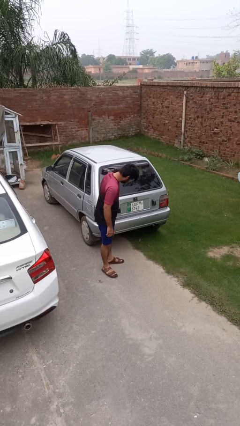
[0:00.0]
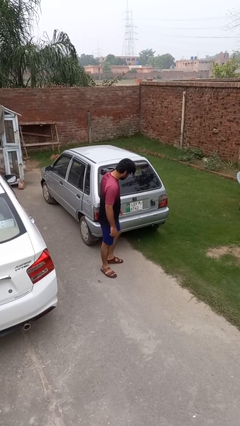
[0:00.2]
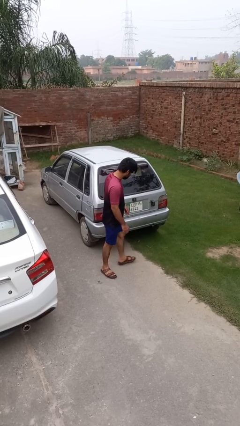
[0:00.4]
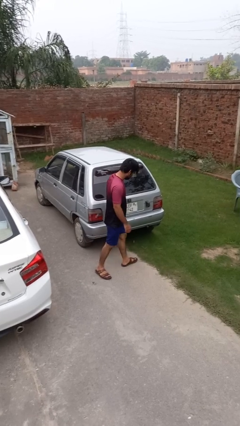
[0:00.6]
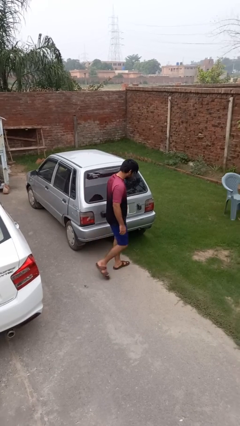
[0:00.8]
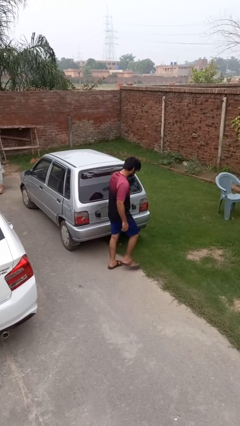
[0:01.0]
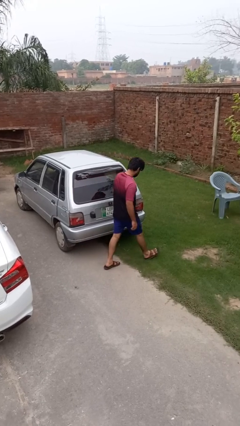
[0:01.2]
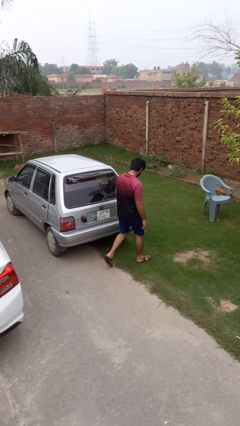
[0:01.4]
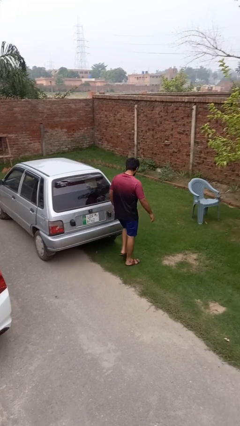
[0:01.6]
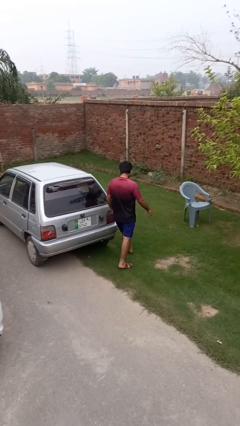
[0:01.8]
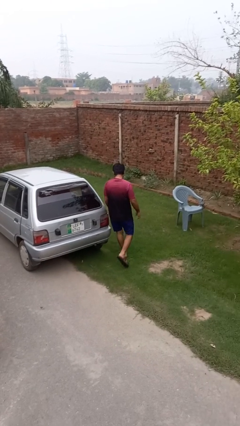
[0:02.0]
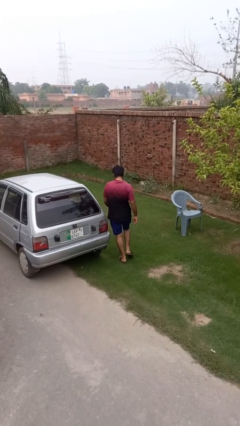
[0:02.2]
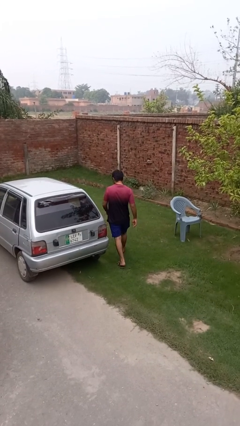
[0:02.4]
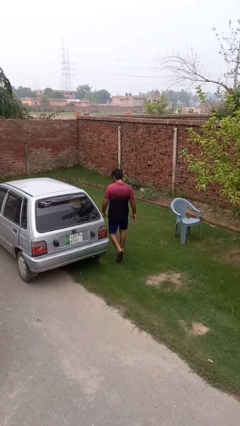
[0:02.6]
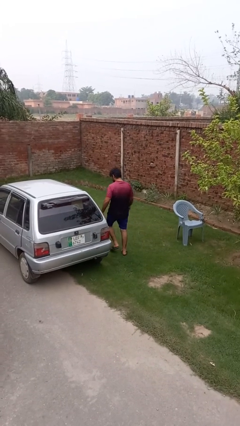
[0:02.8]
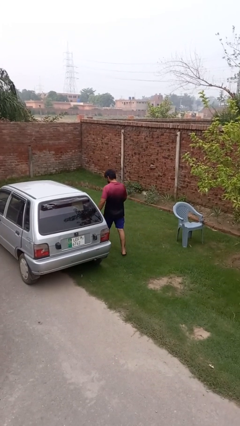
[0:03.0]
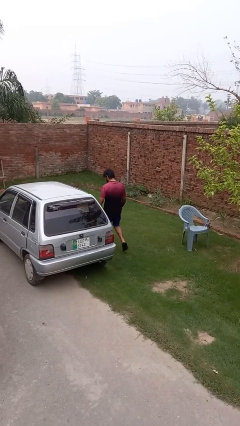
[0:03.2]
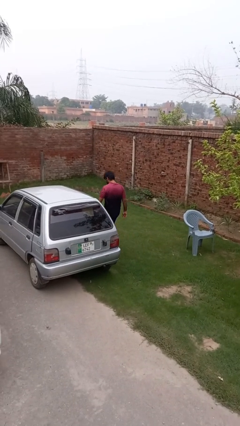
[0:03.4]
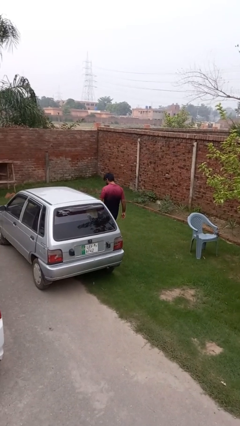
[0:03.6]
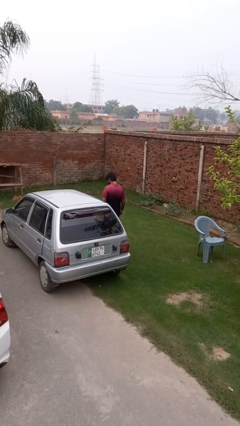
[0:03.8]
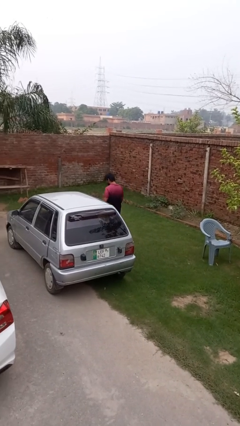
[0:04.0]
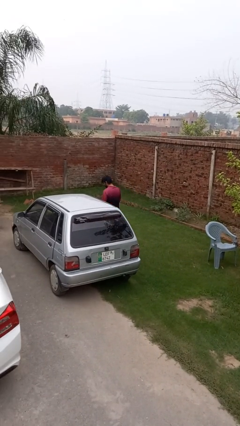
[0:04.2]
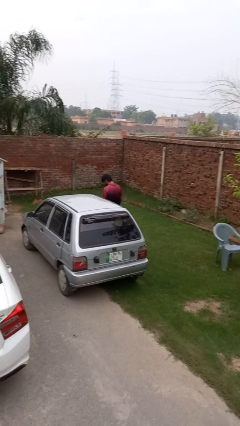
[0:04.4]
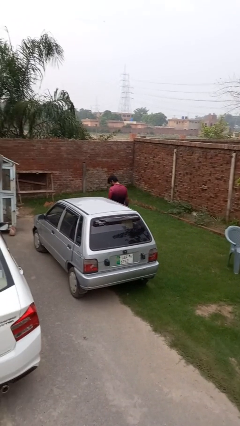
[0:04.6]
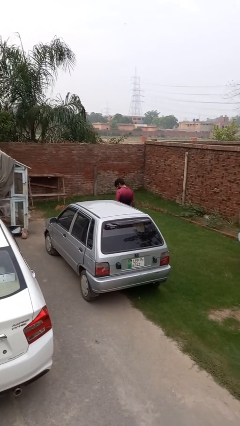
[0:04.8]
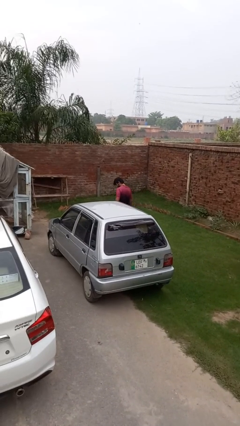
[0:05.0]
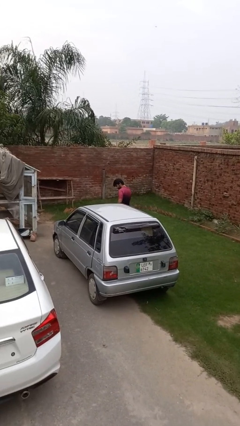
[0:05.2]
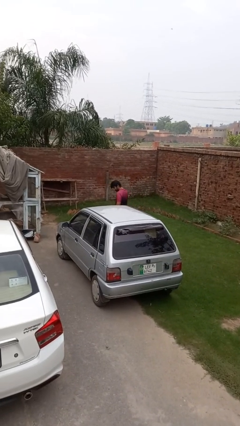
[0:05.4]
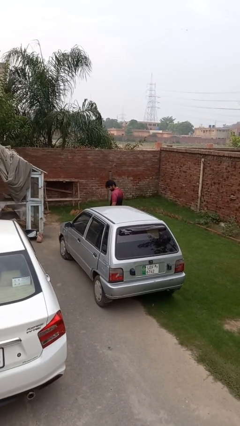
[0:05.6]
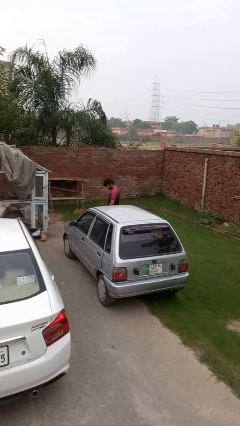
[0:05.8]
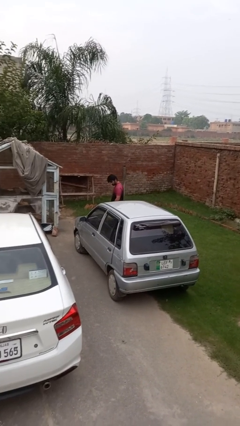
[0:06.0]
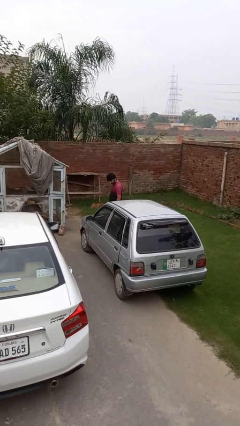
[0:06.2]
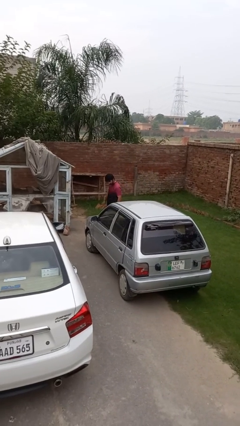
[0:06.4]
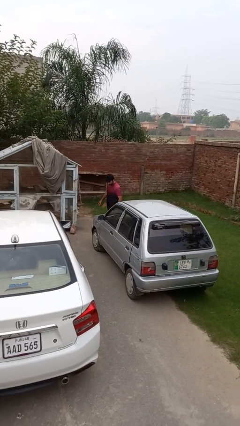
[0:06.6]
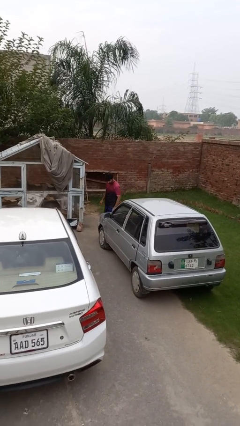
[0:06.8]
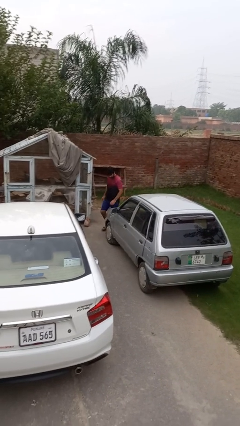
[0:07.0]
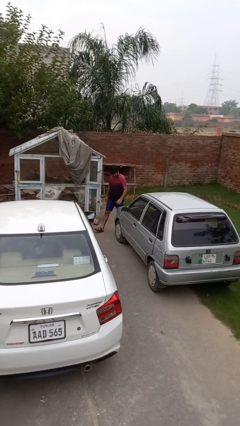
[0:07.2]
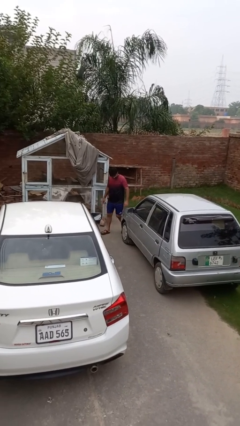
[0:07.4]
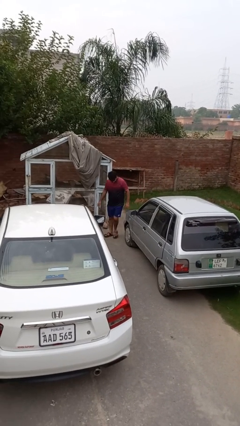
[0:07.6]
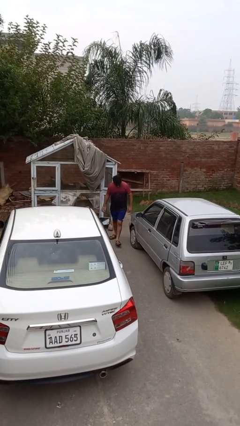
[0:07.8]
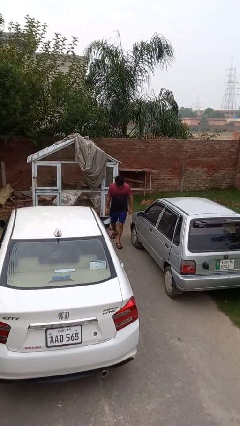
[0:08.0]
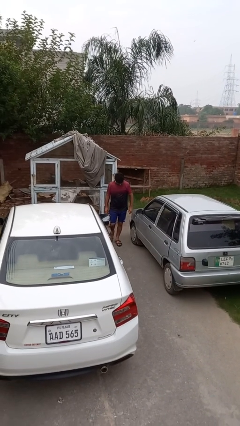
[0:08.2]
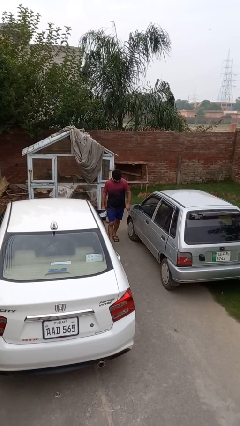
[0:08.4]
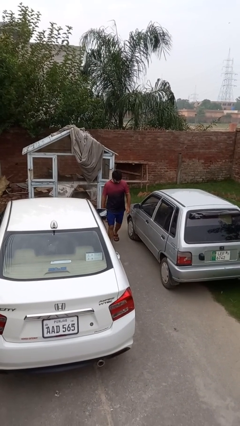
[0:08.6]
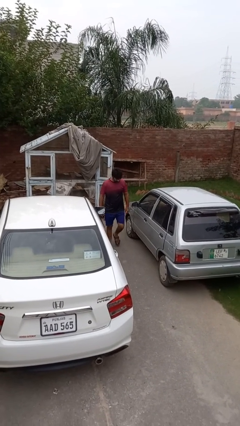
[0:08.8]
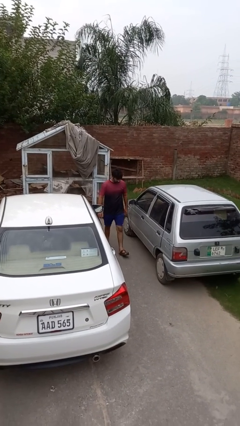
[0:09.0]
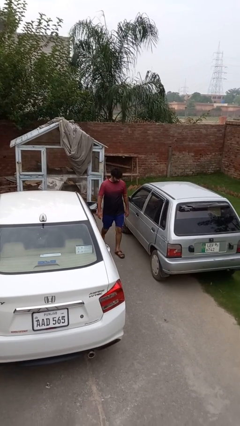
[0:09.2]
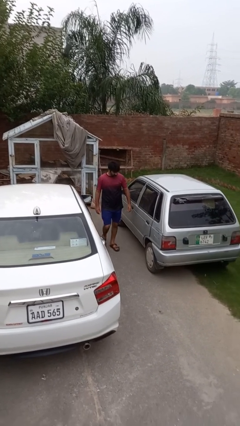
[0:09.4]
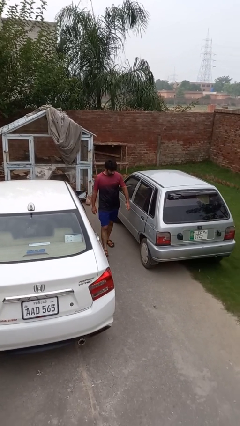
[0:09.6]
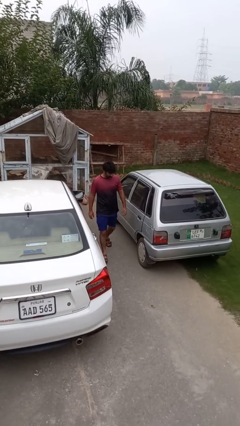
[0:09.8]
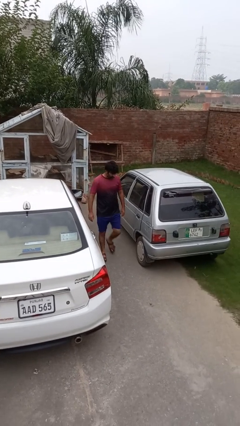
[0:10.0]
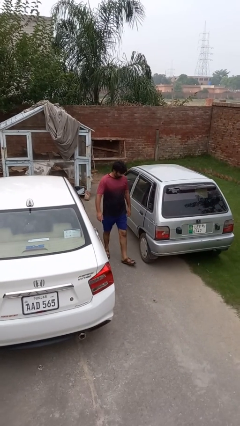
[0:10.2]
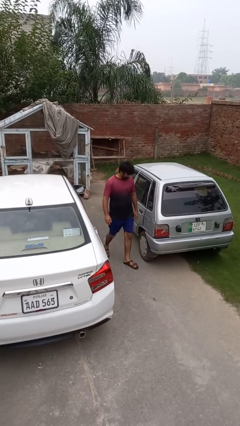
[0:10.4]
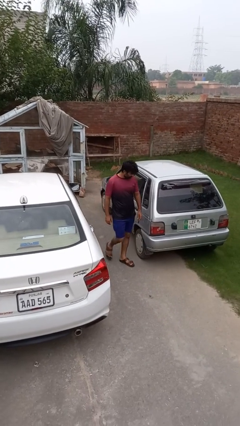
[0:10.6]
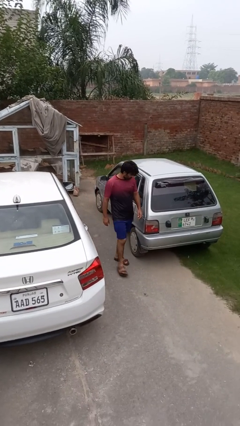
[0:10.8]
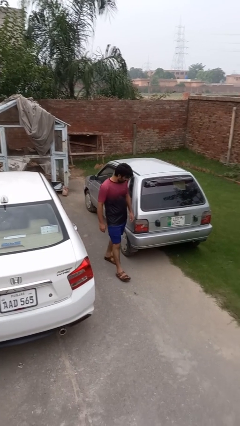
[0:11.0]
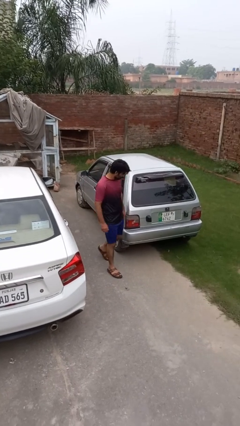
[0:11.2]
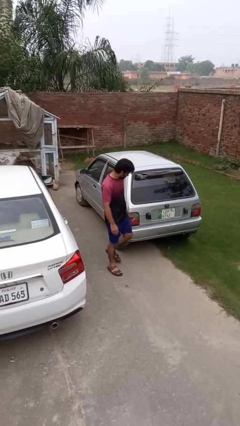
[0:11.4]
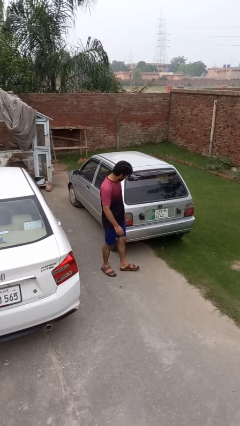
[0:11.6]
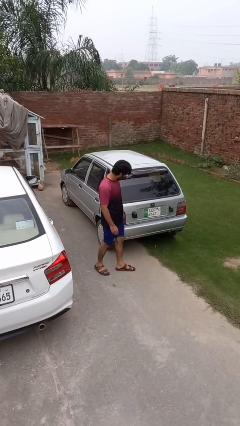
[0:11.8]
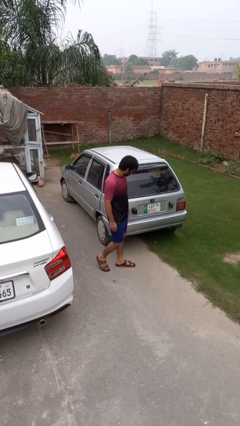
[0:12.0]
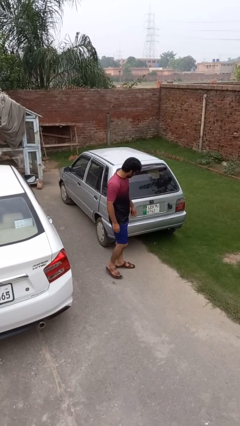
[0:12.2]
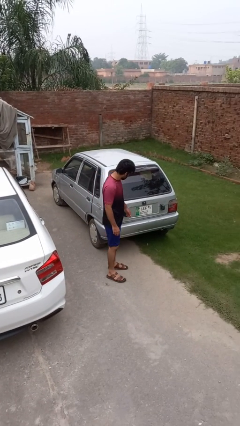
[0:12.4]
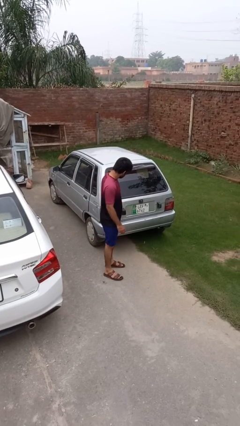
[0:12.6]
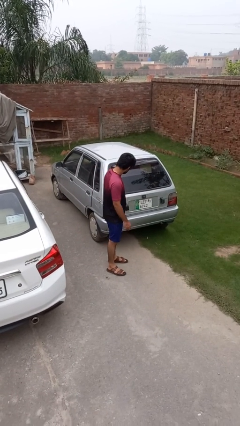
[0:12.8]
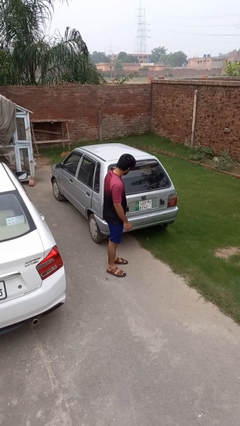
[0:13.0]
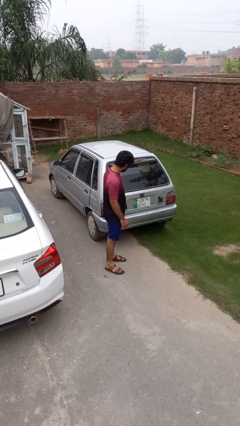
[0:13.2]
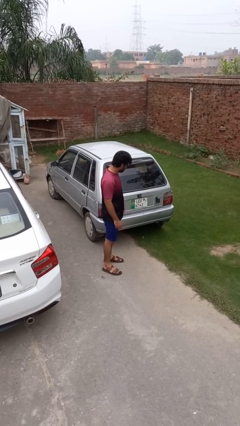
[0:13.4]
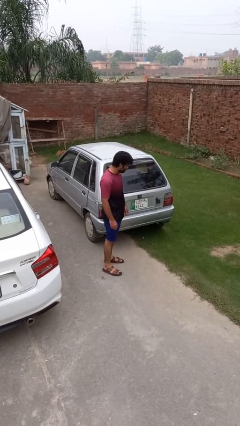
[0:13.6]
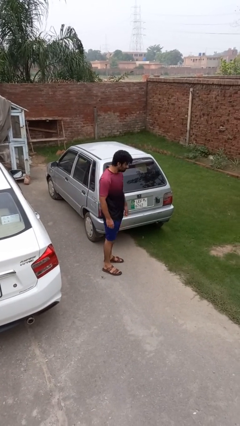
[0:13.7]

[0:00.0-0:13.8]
person walks around car

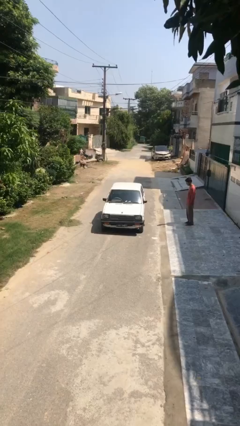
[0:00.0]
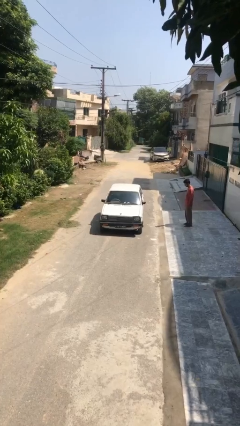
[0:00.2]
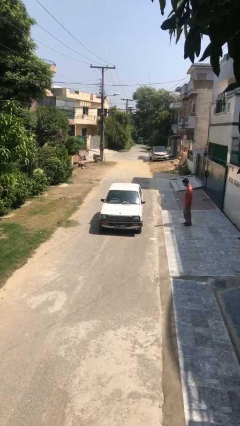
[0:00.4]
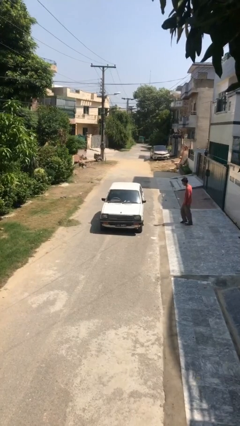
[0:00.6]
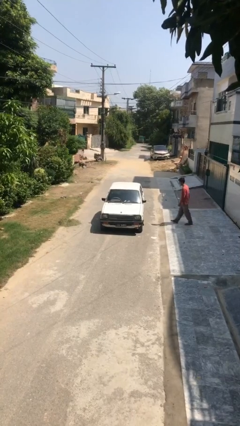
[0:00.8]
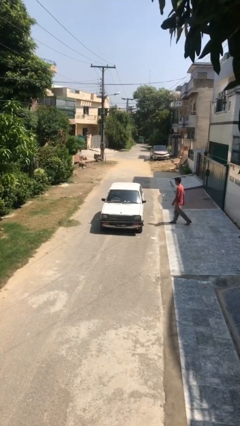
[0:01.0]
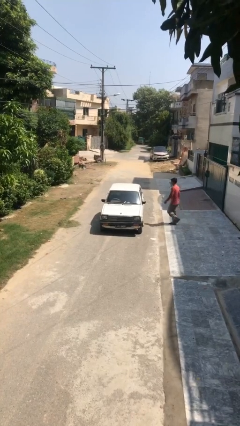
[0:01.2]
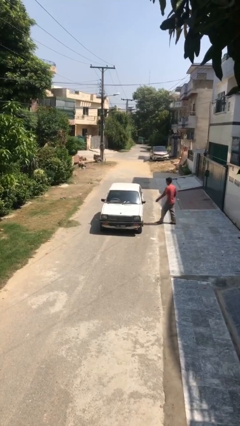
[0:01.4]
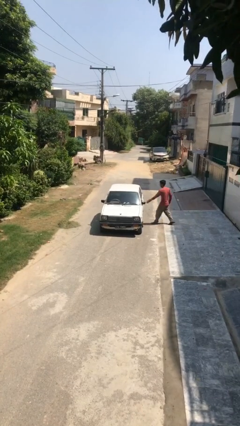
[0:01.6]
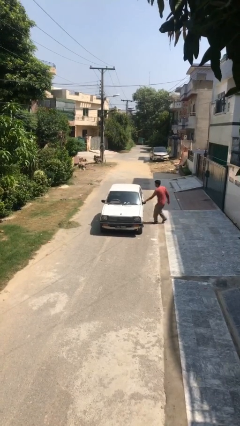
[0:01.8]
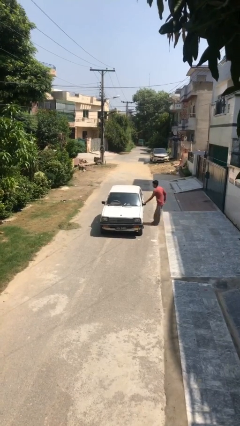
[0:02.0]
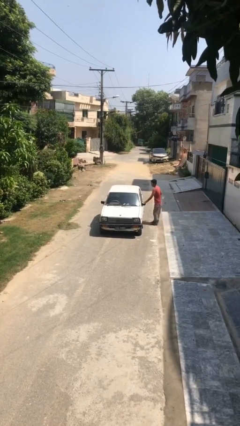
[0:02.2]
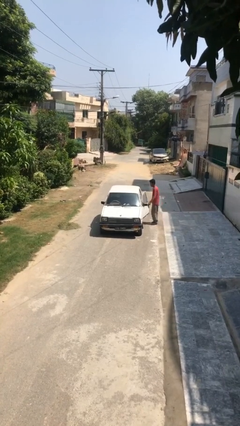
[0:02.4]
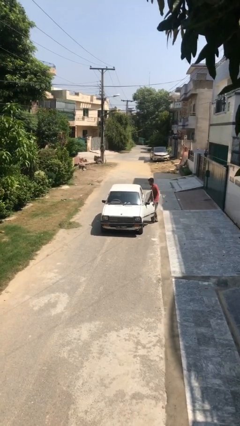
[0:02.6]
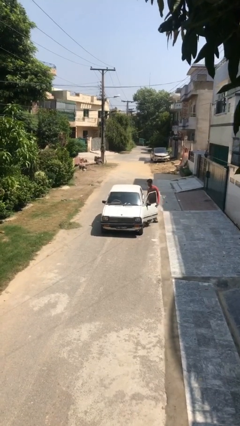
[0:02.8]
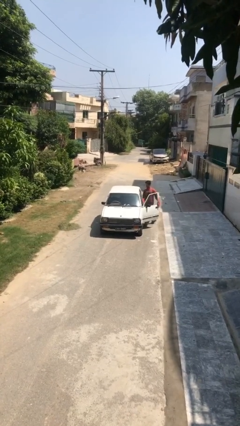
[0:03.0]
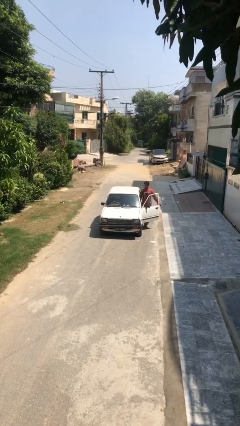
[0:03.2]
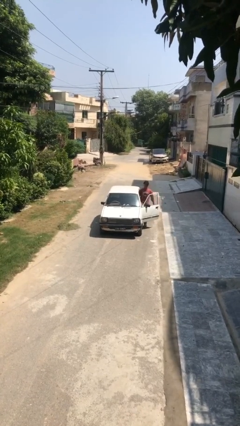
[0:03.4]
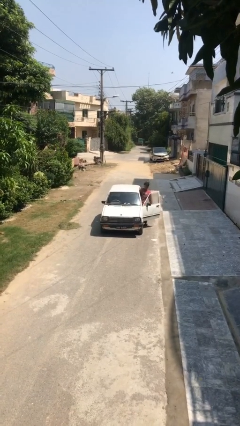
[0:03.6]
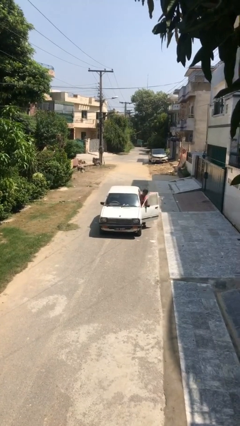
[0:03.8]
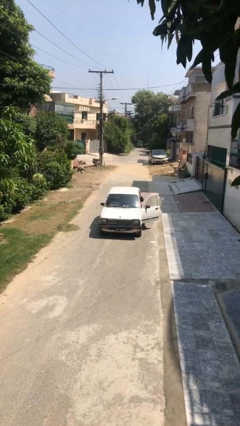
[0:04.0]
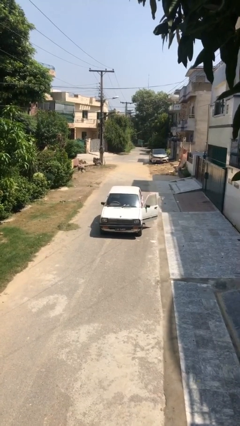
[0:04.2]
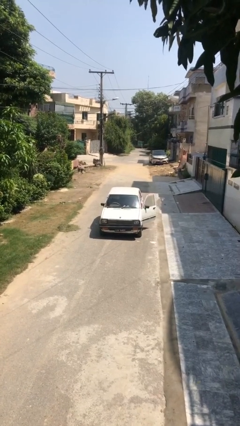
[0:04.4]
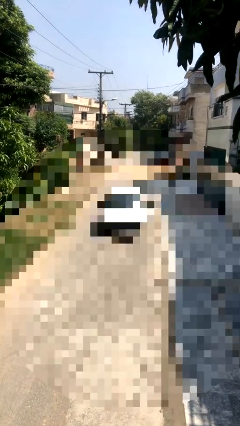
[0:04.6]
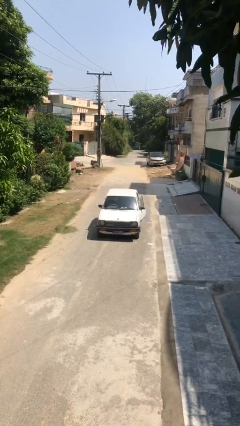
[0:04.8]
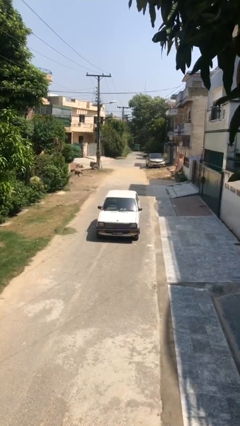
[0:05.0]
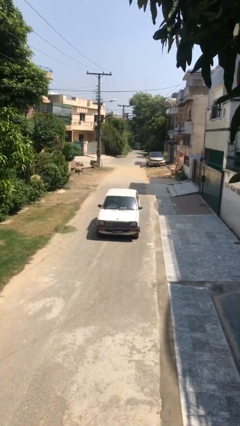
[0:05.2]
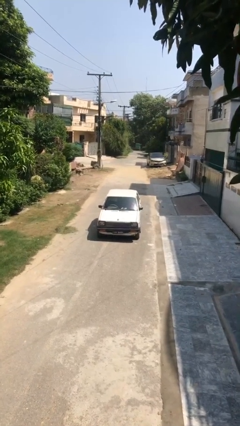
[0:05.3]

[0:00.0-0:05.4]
car picks up person
